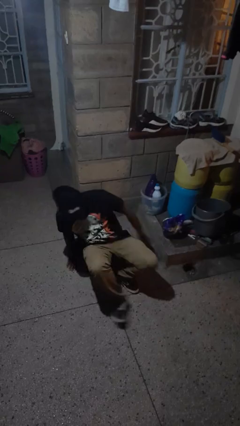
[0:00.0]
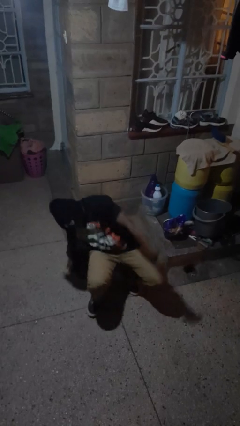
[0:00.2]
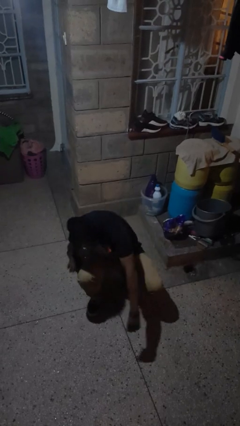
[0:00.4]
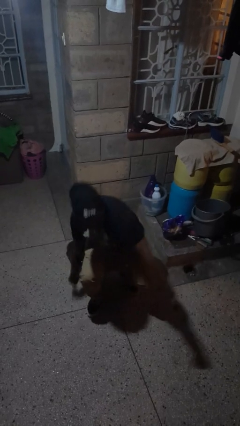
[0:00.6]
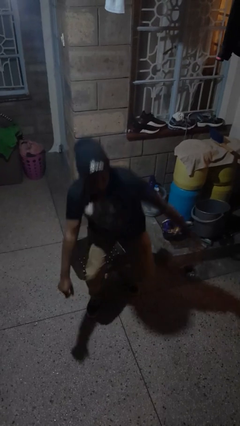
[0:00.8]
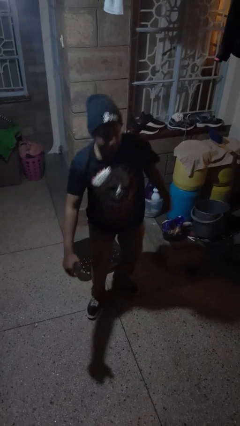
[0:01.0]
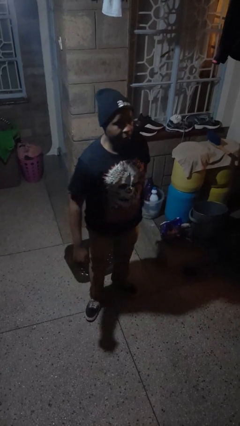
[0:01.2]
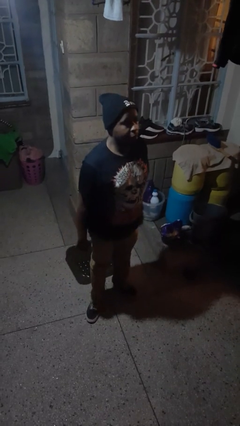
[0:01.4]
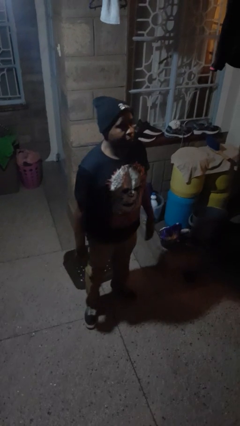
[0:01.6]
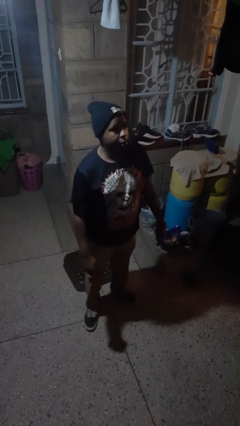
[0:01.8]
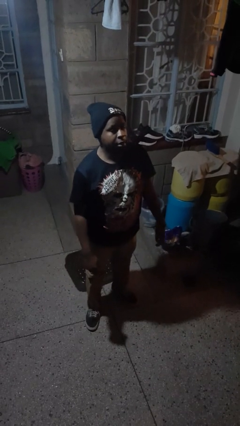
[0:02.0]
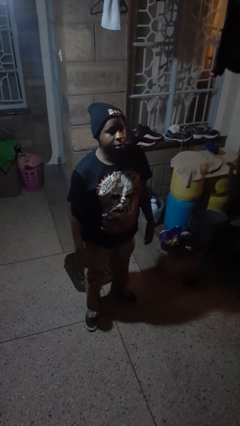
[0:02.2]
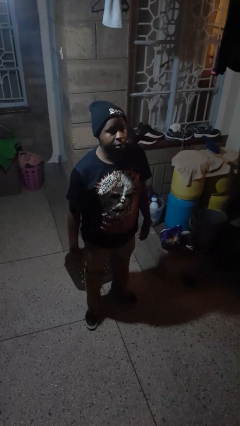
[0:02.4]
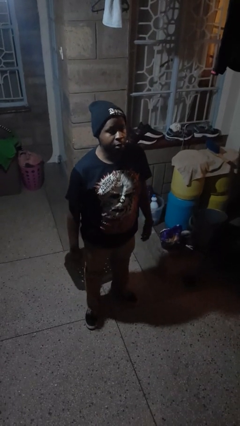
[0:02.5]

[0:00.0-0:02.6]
person stands up from floor

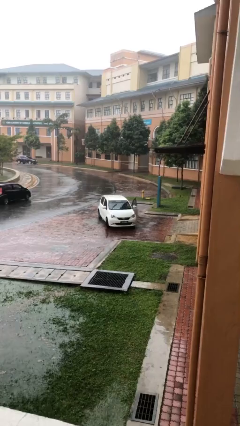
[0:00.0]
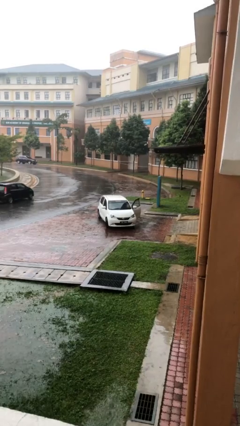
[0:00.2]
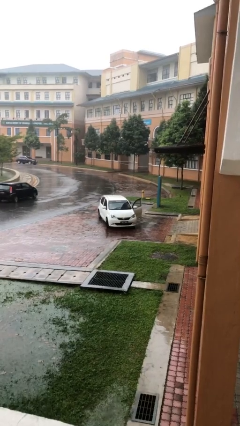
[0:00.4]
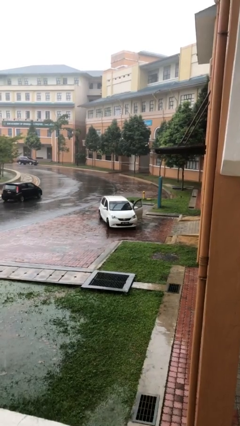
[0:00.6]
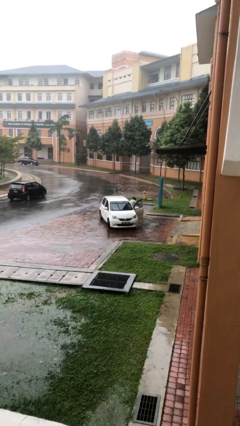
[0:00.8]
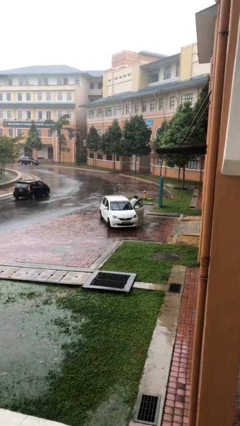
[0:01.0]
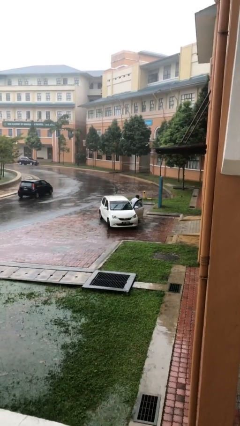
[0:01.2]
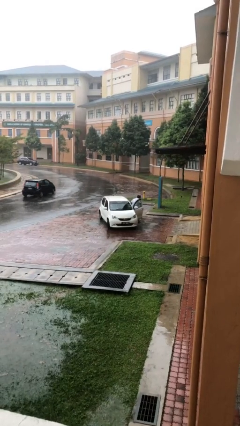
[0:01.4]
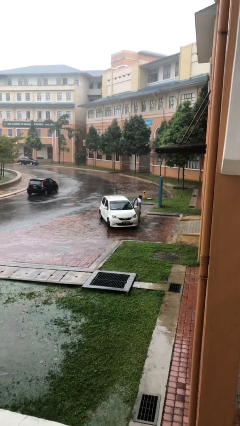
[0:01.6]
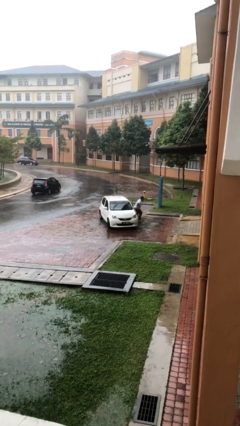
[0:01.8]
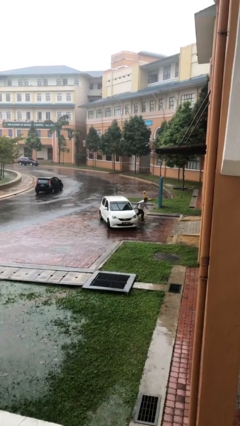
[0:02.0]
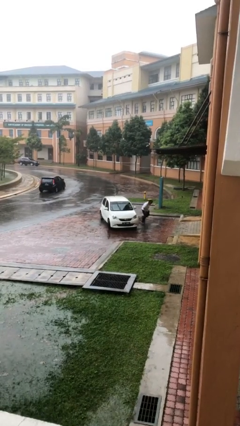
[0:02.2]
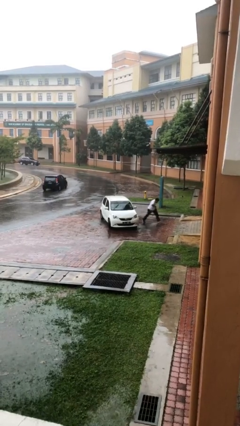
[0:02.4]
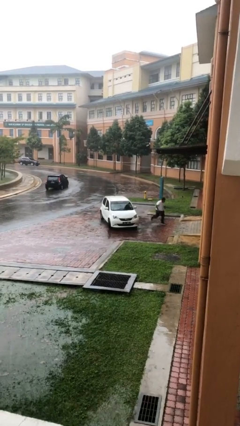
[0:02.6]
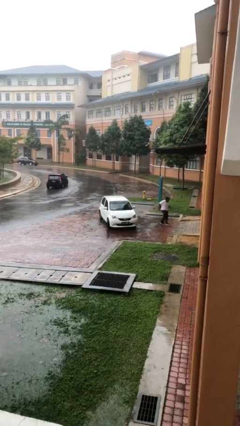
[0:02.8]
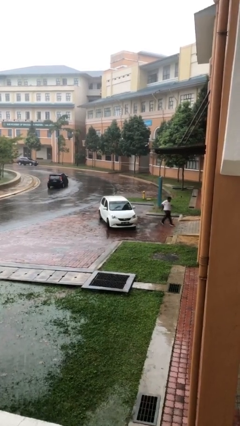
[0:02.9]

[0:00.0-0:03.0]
car drops off person

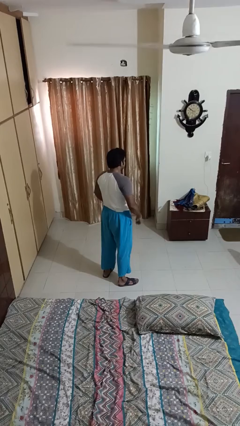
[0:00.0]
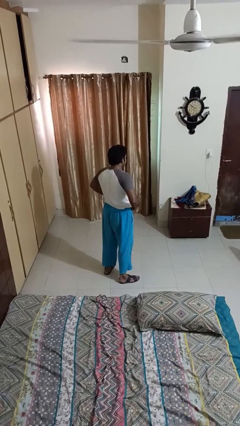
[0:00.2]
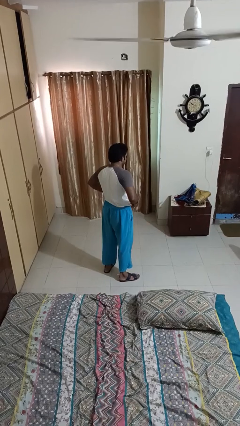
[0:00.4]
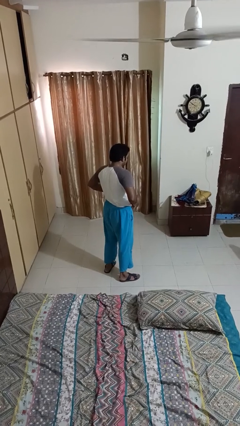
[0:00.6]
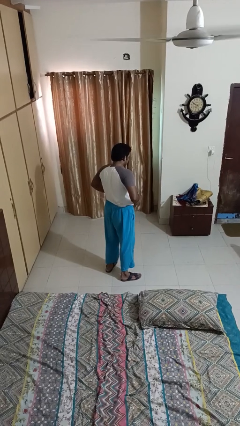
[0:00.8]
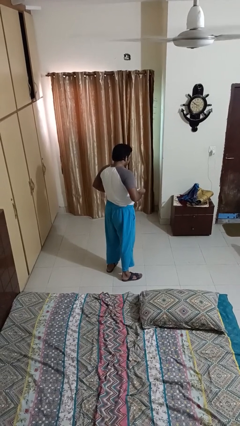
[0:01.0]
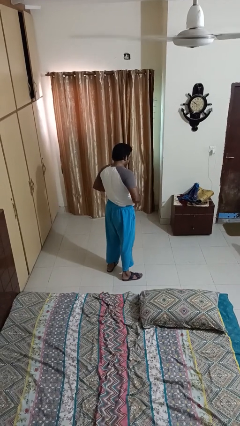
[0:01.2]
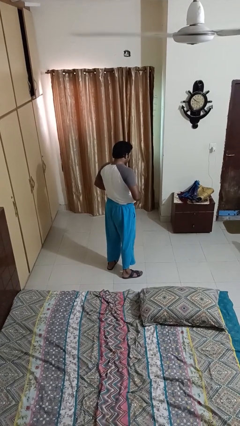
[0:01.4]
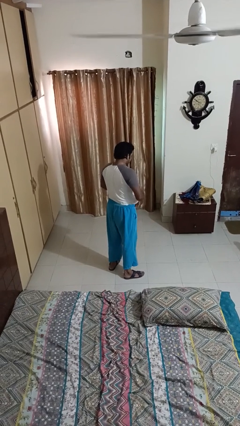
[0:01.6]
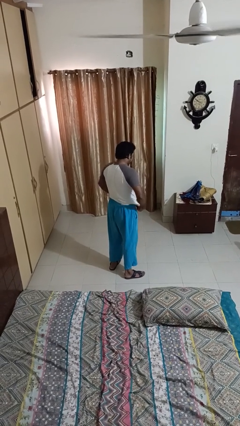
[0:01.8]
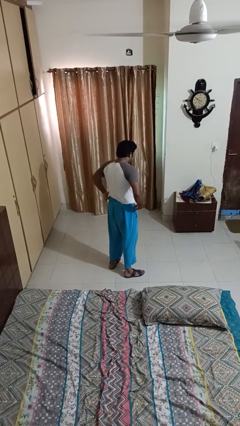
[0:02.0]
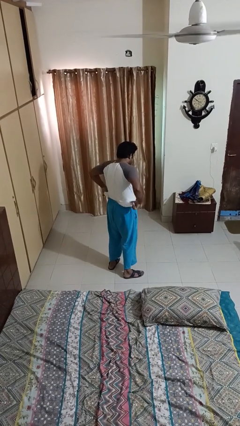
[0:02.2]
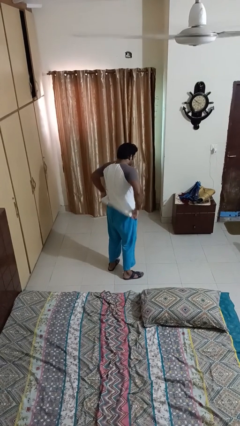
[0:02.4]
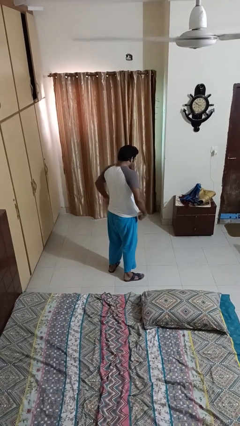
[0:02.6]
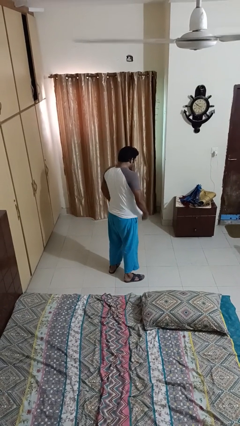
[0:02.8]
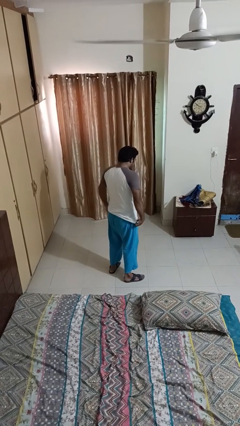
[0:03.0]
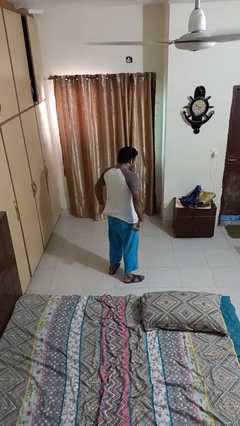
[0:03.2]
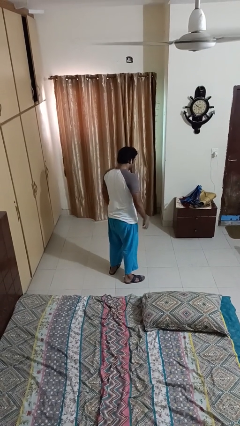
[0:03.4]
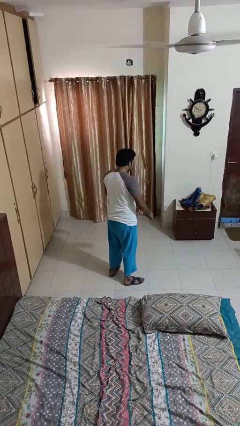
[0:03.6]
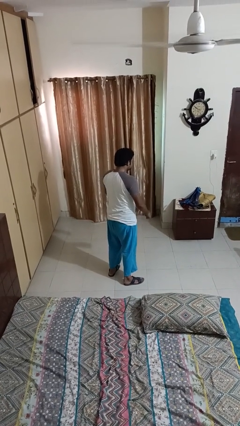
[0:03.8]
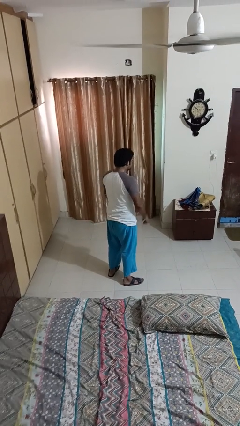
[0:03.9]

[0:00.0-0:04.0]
person untucks shirt

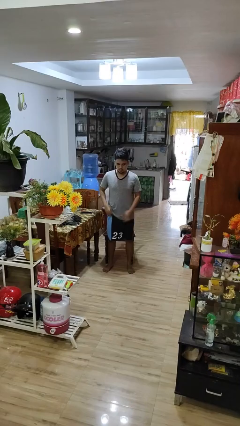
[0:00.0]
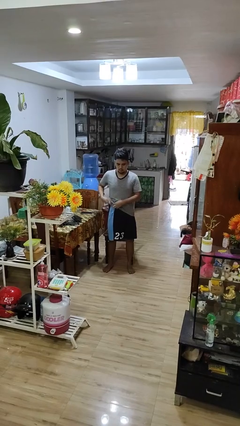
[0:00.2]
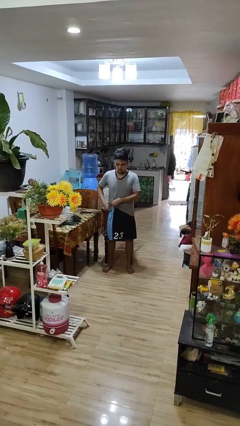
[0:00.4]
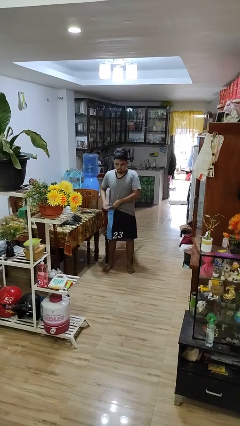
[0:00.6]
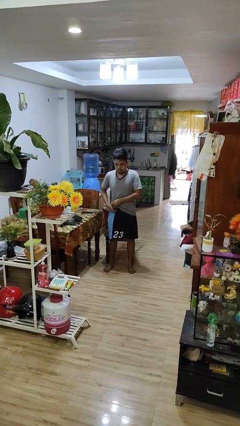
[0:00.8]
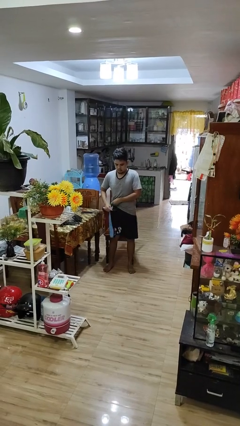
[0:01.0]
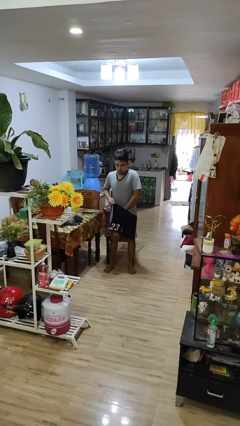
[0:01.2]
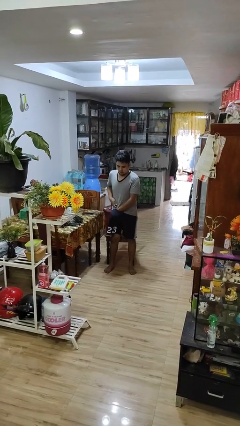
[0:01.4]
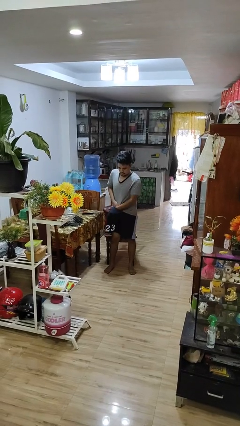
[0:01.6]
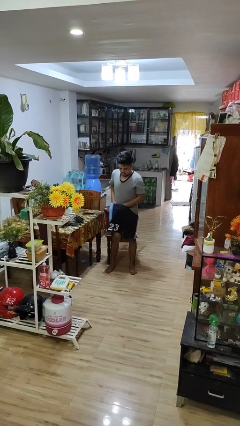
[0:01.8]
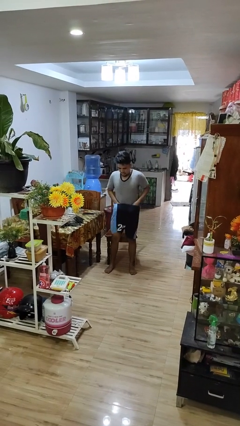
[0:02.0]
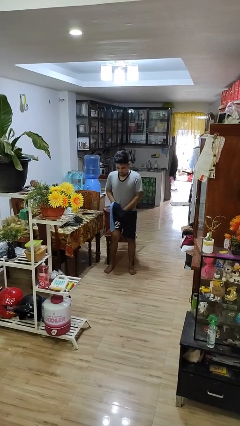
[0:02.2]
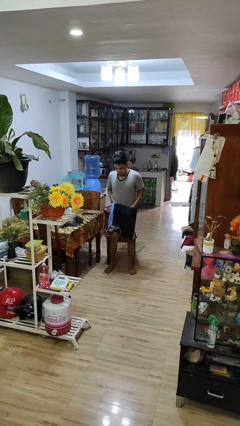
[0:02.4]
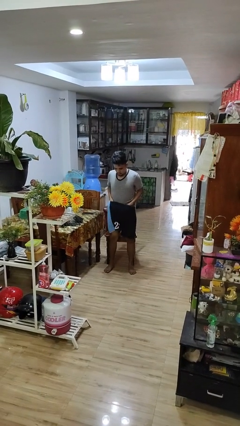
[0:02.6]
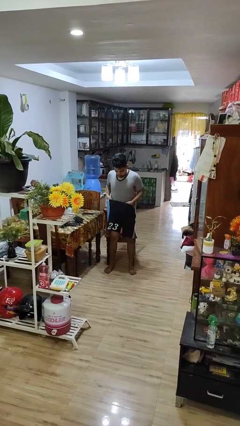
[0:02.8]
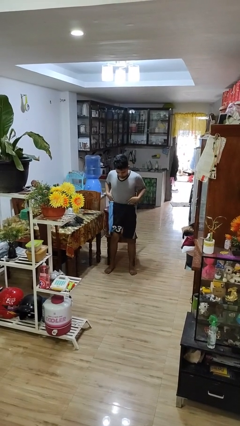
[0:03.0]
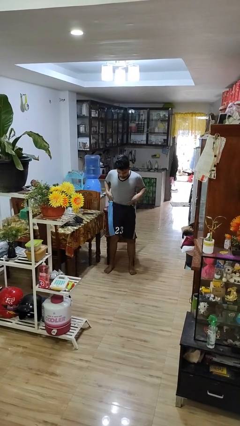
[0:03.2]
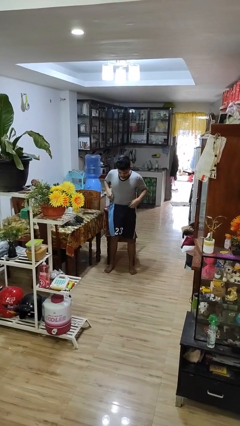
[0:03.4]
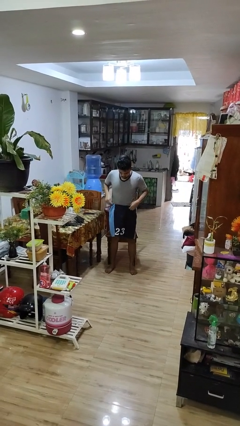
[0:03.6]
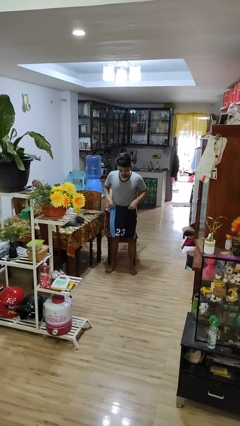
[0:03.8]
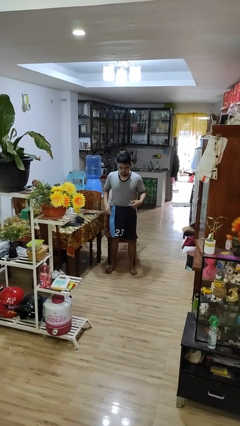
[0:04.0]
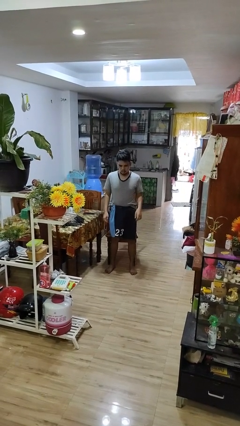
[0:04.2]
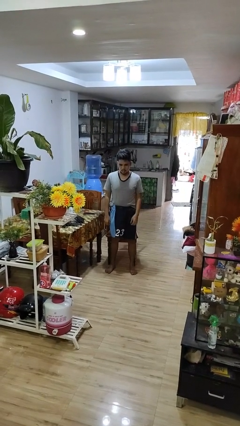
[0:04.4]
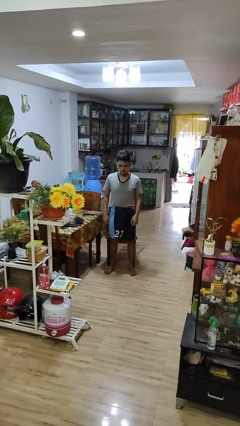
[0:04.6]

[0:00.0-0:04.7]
person tucks in shirt

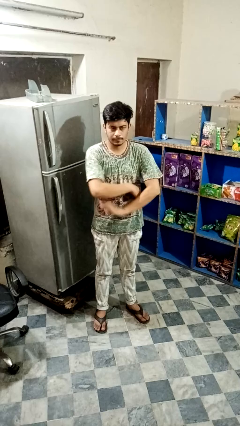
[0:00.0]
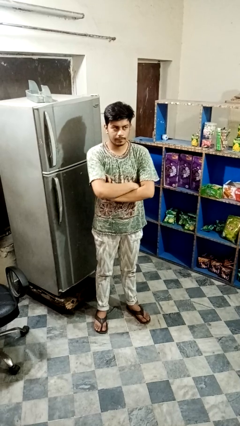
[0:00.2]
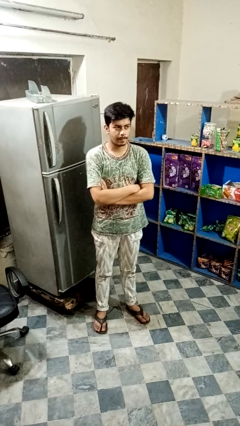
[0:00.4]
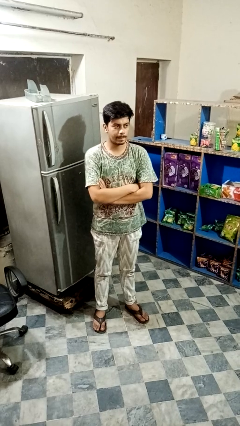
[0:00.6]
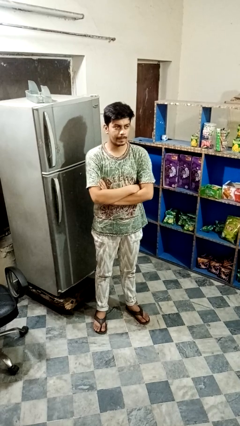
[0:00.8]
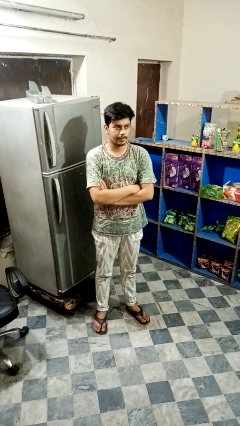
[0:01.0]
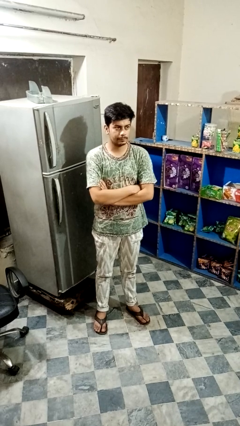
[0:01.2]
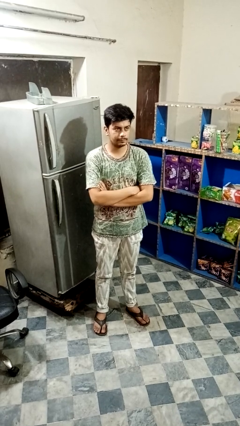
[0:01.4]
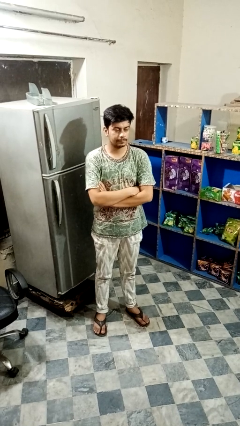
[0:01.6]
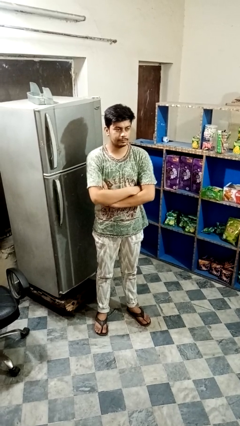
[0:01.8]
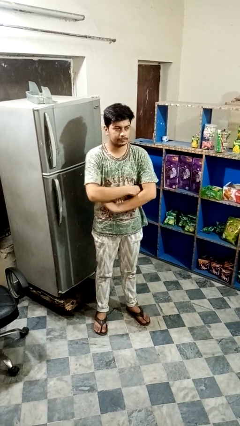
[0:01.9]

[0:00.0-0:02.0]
person crosses arms

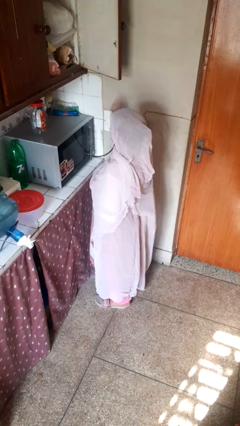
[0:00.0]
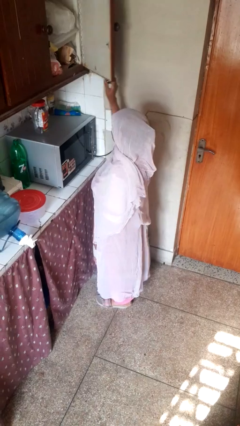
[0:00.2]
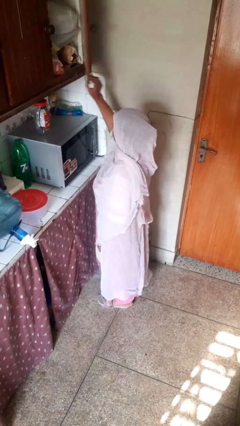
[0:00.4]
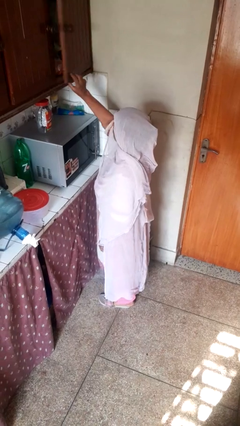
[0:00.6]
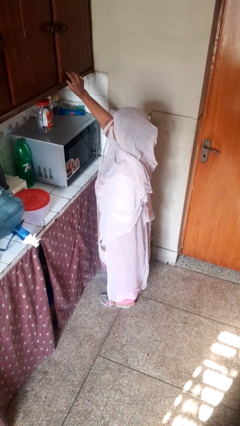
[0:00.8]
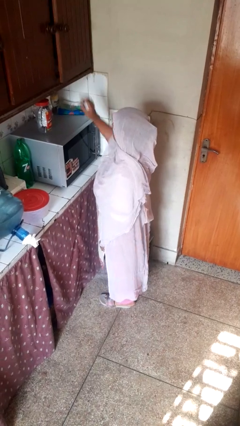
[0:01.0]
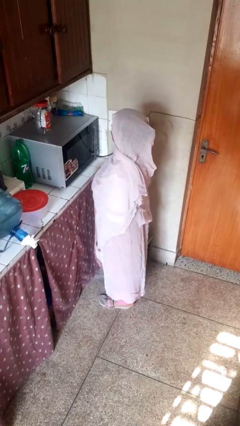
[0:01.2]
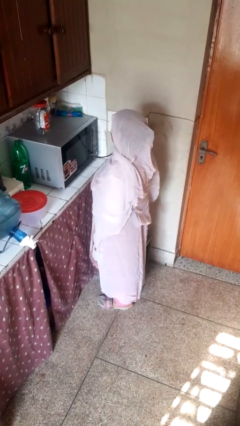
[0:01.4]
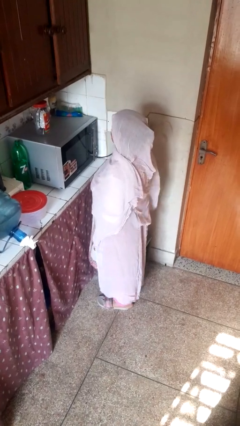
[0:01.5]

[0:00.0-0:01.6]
person closes cabinet
